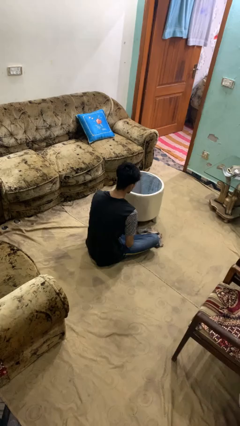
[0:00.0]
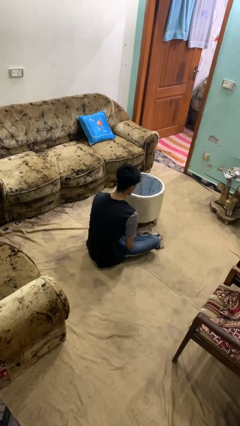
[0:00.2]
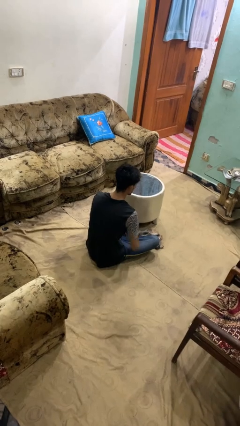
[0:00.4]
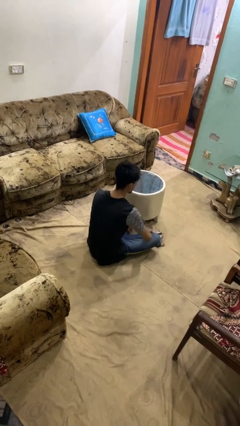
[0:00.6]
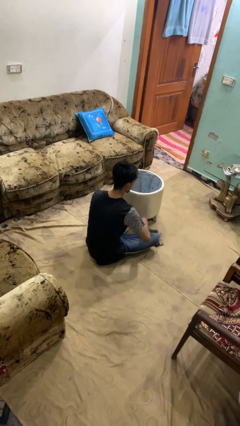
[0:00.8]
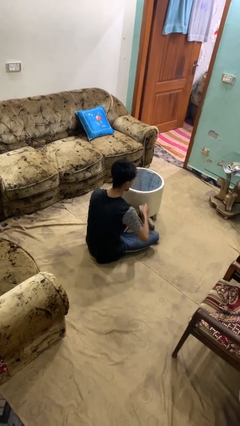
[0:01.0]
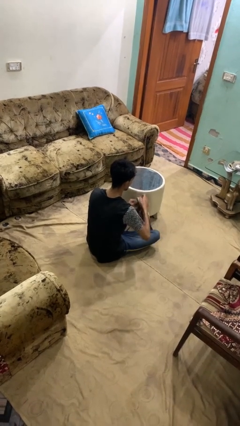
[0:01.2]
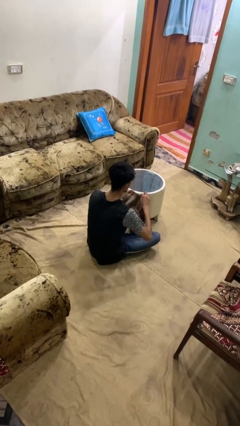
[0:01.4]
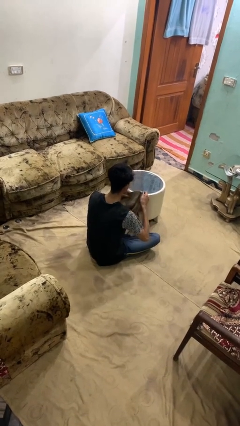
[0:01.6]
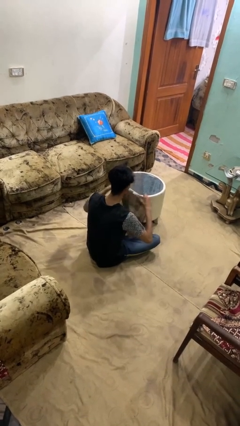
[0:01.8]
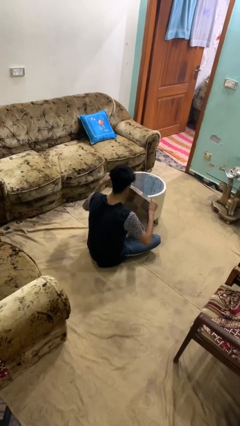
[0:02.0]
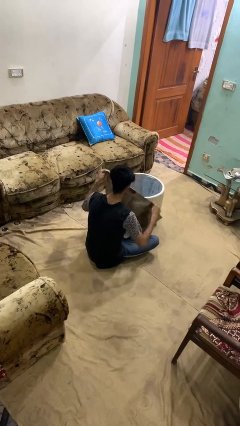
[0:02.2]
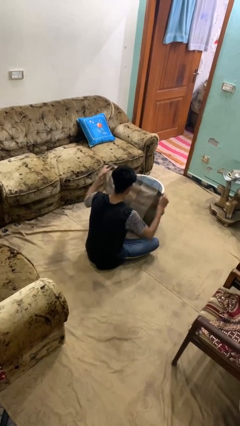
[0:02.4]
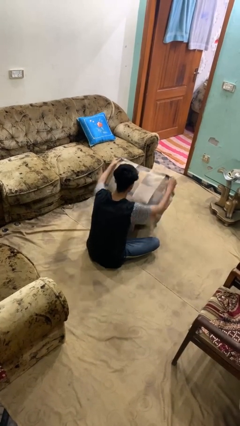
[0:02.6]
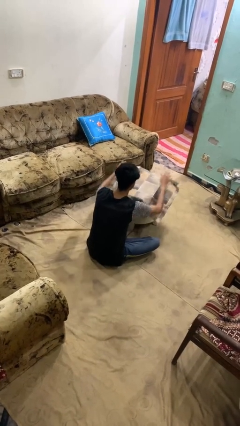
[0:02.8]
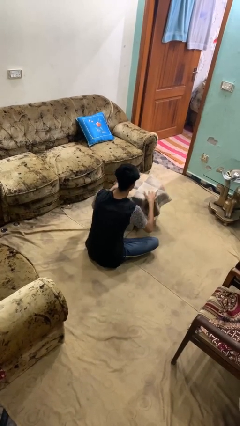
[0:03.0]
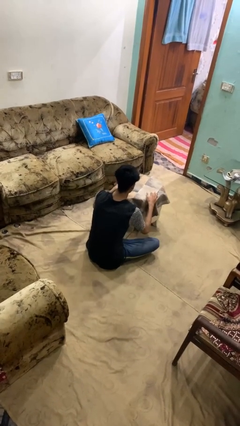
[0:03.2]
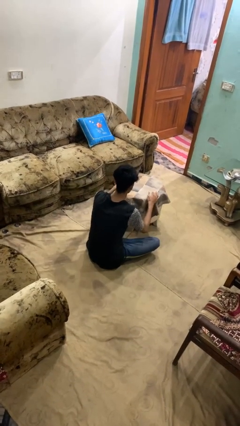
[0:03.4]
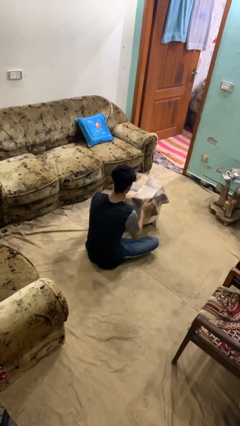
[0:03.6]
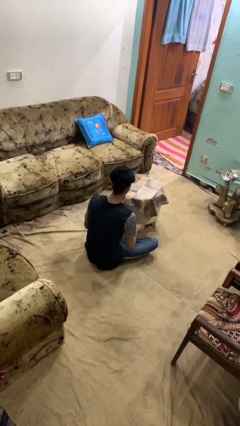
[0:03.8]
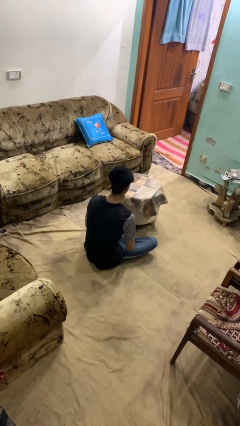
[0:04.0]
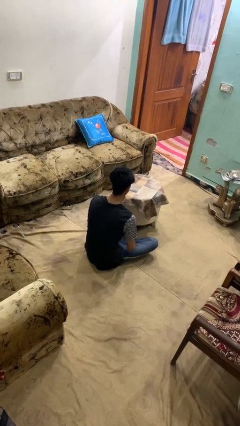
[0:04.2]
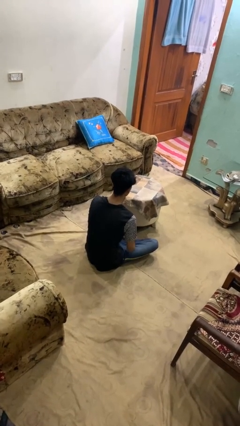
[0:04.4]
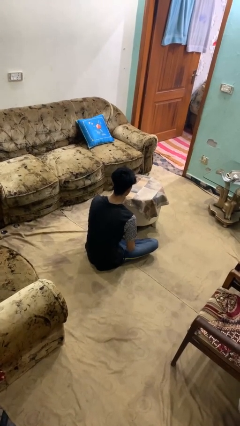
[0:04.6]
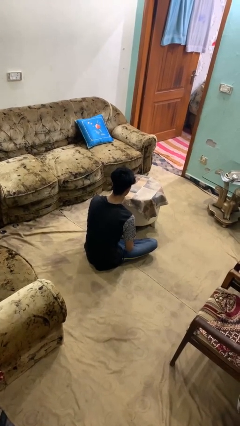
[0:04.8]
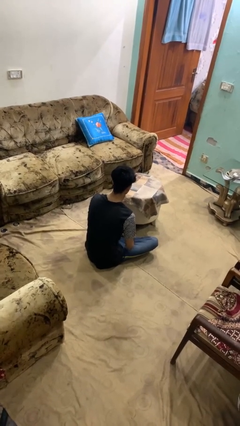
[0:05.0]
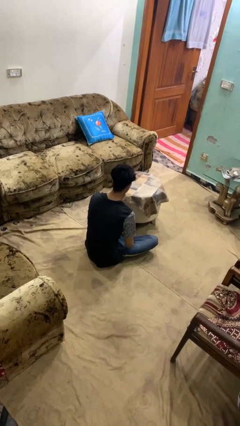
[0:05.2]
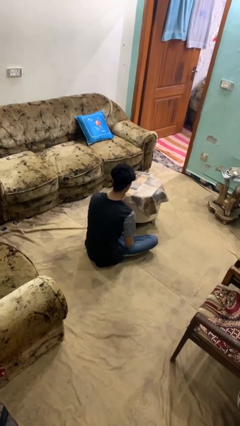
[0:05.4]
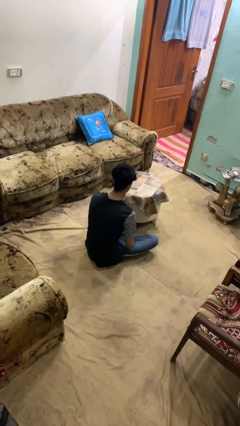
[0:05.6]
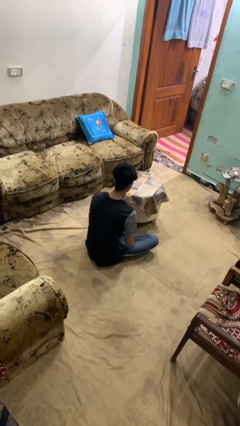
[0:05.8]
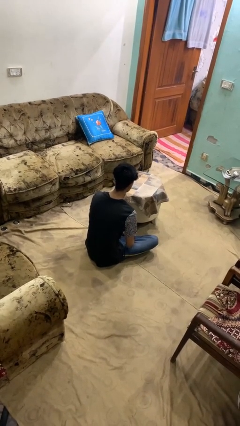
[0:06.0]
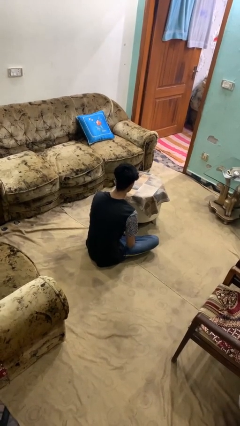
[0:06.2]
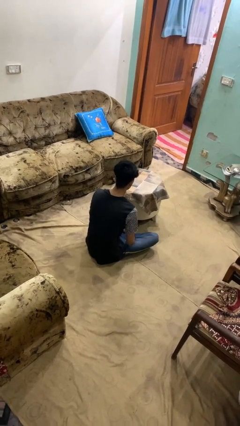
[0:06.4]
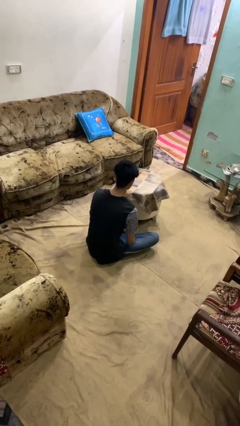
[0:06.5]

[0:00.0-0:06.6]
person spreads tablecloth

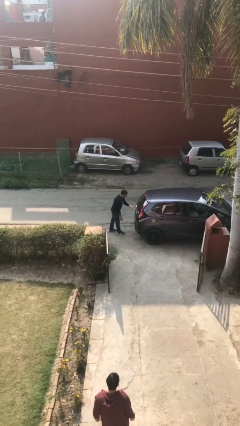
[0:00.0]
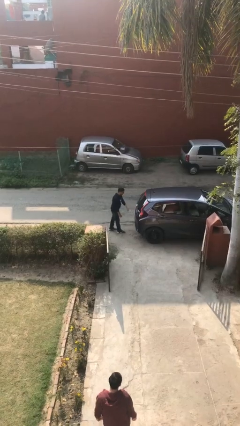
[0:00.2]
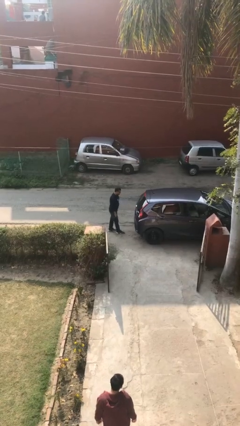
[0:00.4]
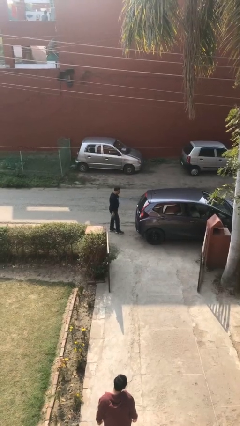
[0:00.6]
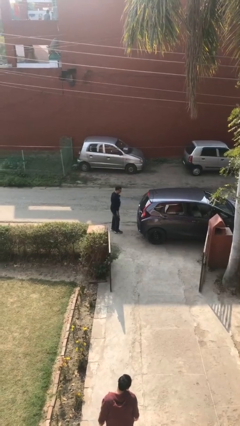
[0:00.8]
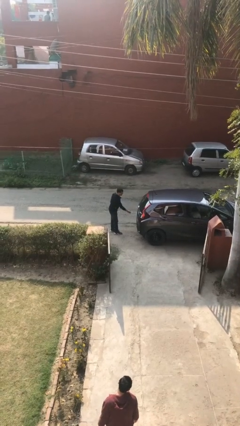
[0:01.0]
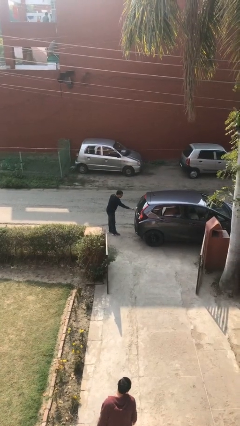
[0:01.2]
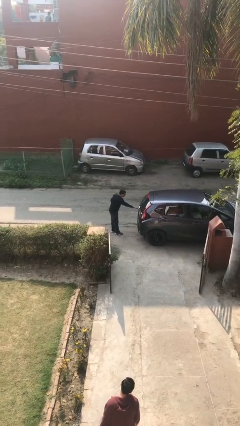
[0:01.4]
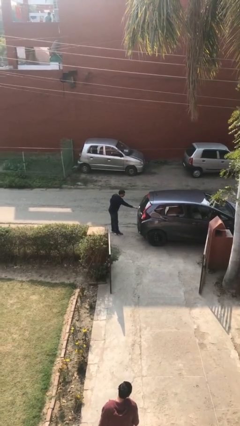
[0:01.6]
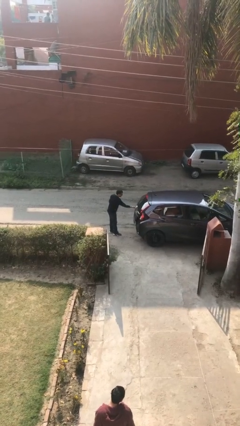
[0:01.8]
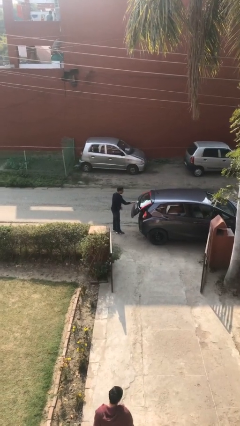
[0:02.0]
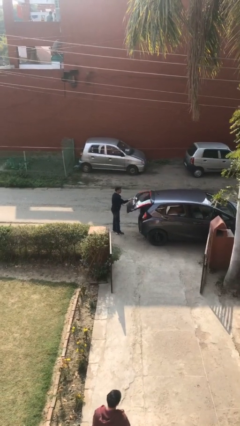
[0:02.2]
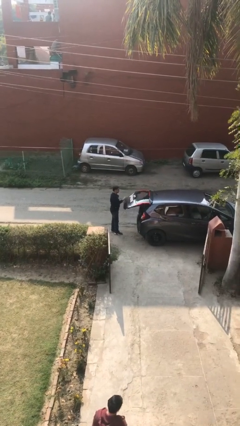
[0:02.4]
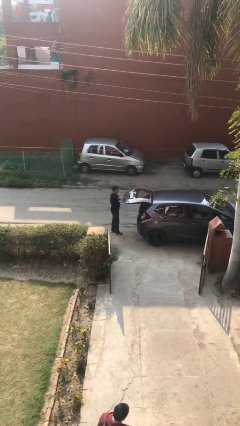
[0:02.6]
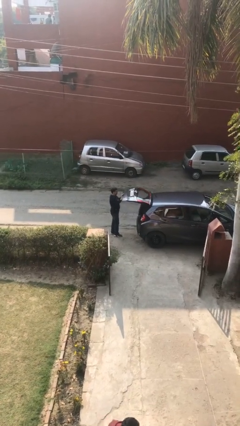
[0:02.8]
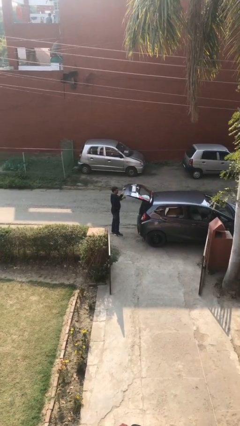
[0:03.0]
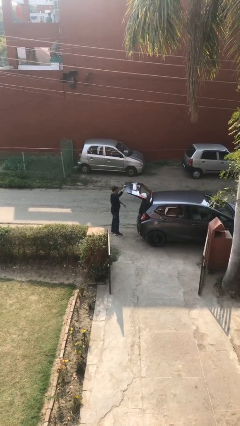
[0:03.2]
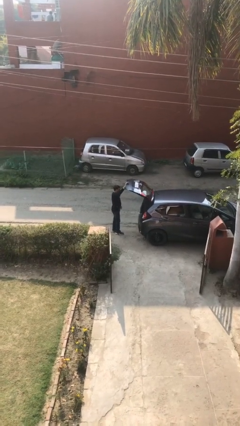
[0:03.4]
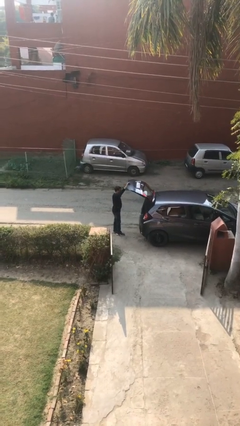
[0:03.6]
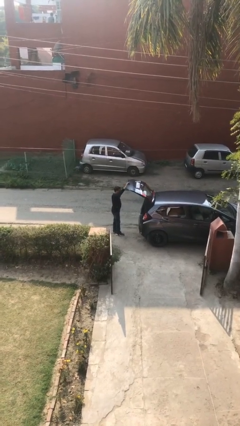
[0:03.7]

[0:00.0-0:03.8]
person opens car trunk

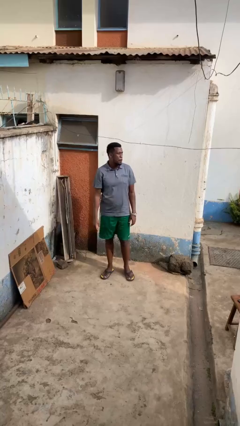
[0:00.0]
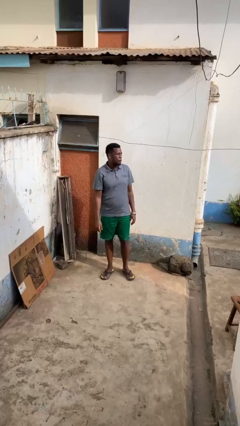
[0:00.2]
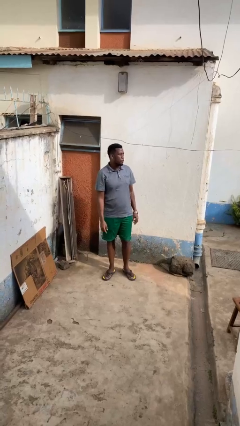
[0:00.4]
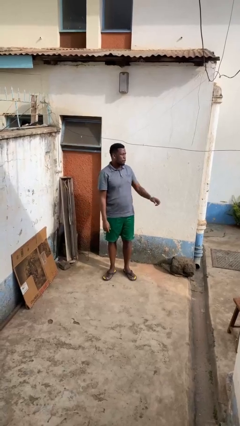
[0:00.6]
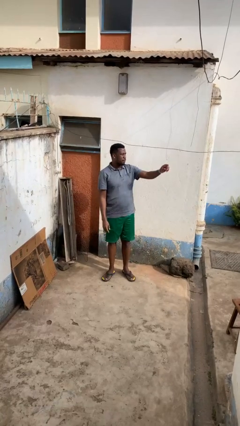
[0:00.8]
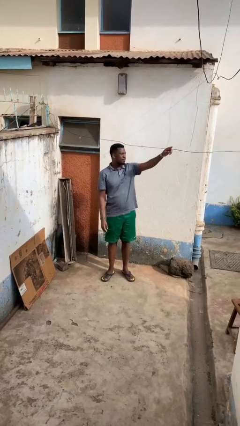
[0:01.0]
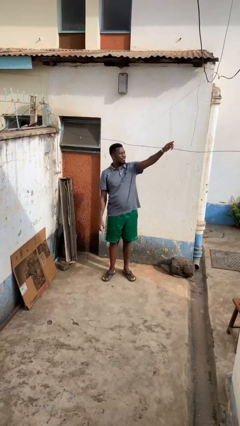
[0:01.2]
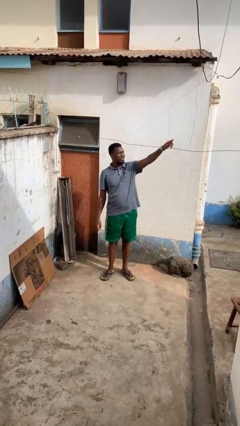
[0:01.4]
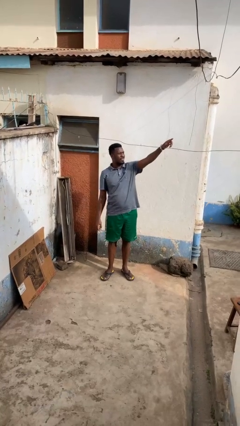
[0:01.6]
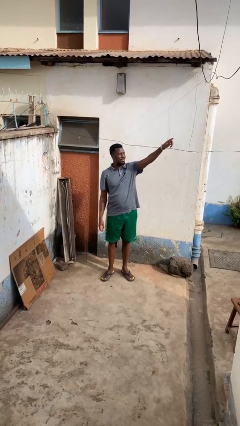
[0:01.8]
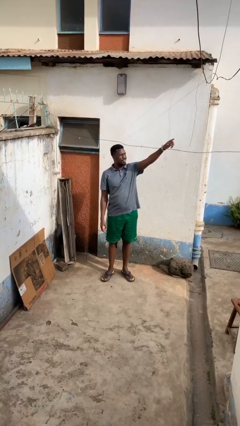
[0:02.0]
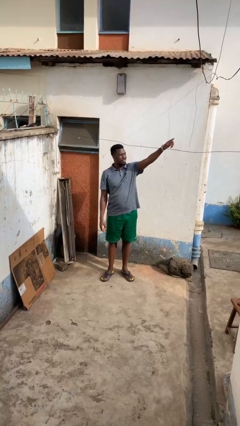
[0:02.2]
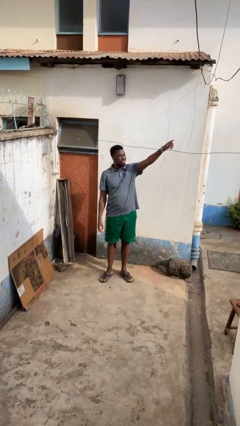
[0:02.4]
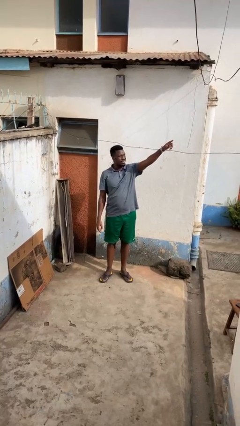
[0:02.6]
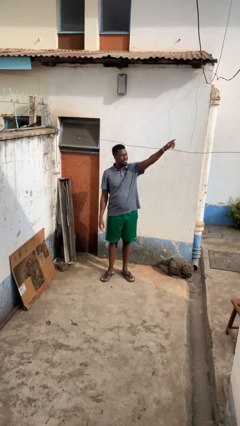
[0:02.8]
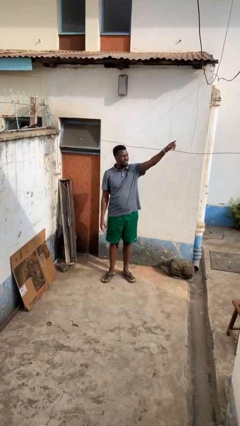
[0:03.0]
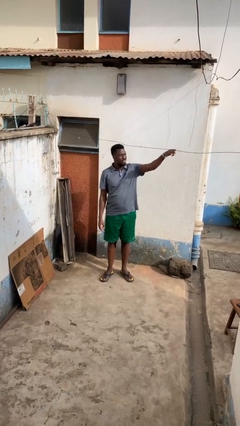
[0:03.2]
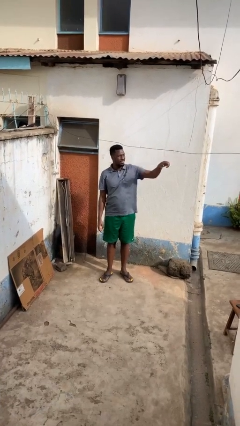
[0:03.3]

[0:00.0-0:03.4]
person points at person

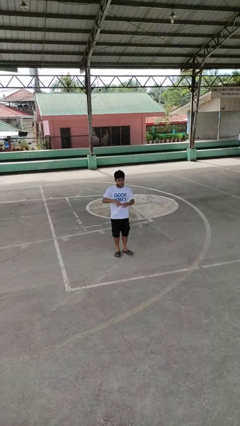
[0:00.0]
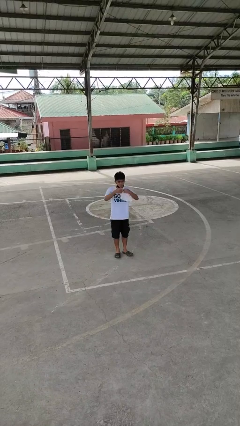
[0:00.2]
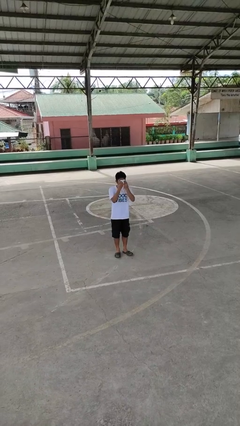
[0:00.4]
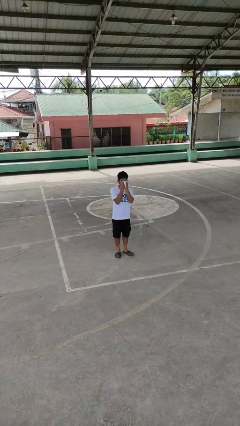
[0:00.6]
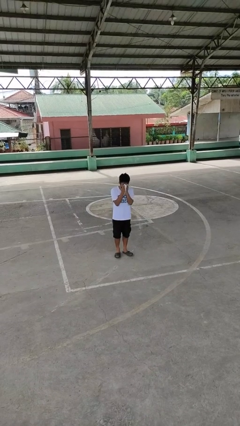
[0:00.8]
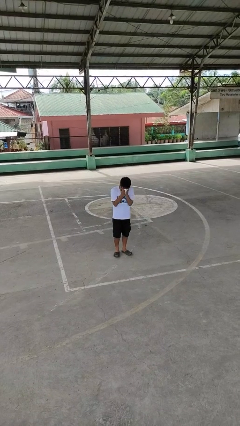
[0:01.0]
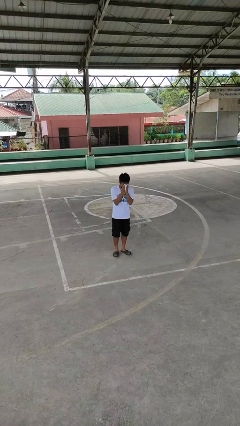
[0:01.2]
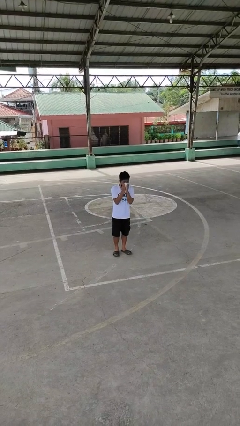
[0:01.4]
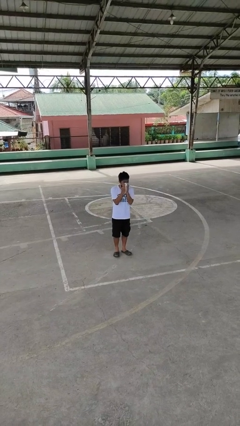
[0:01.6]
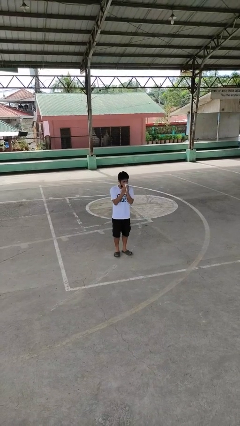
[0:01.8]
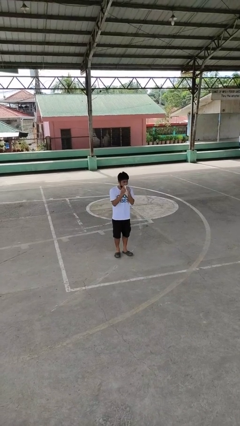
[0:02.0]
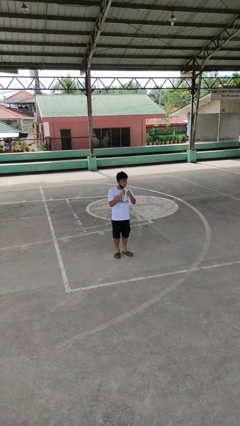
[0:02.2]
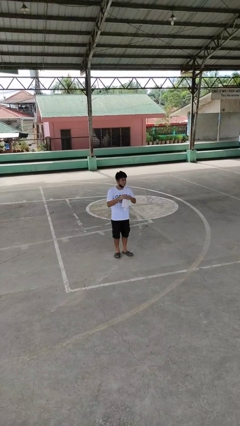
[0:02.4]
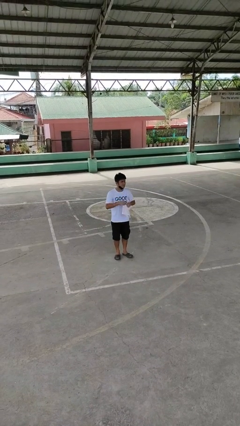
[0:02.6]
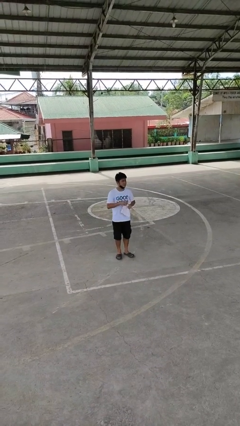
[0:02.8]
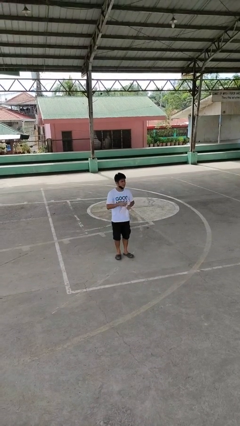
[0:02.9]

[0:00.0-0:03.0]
person holds object above head

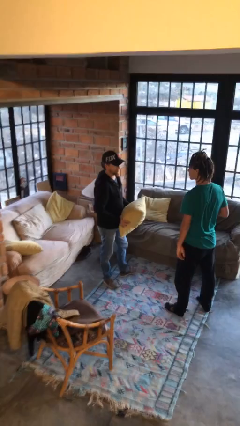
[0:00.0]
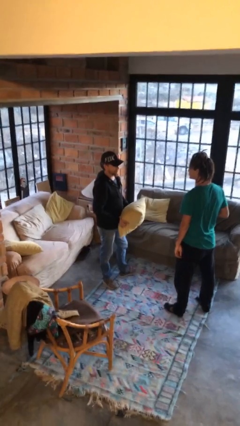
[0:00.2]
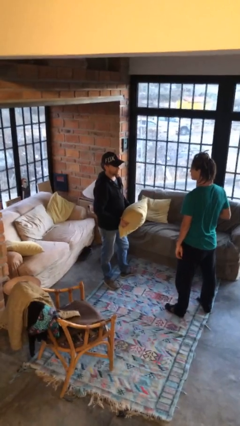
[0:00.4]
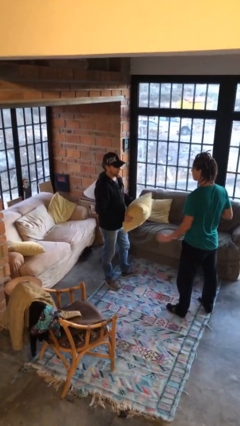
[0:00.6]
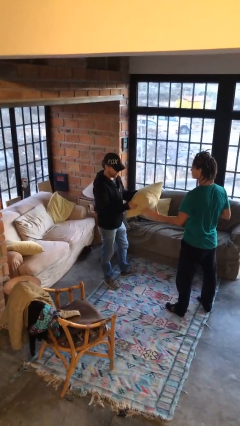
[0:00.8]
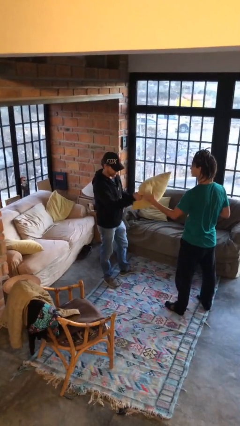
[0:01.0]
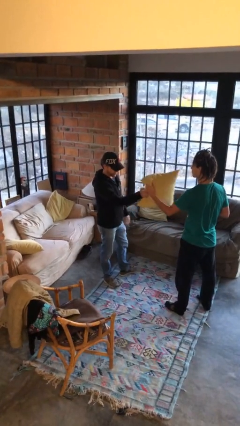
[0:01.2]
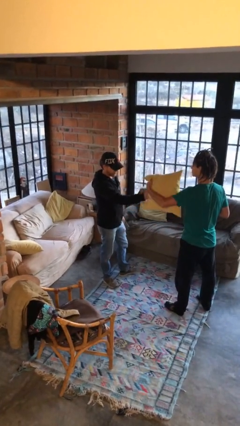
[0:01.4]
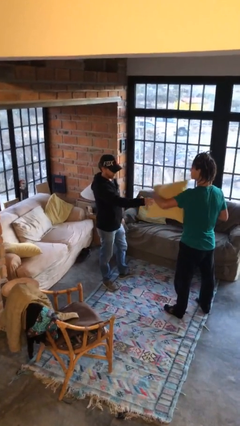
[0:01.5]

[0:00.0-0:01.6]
person transfers object to person
